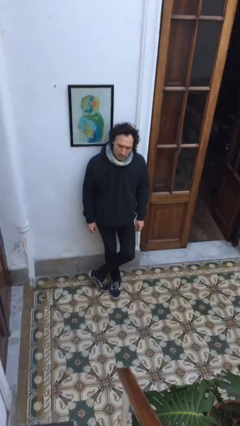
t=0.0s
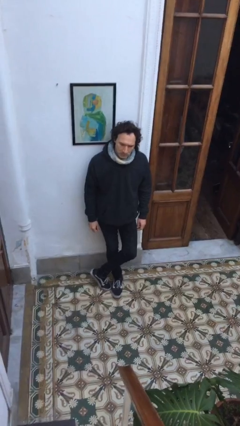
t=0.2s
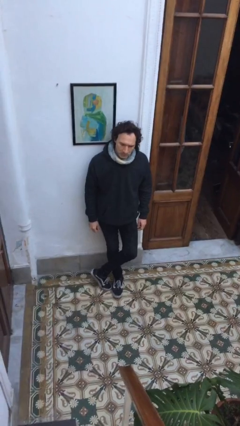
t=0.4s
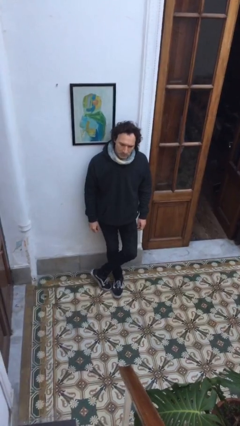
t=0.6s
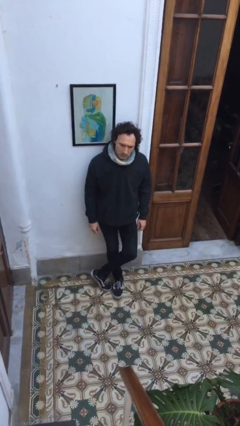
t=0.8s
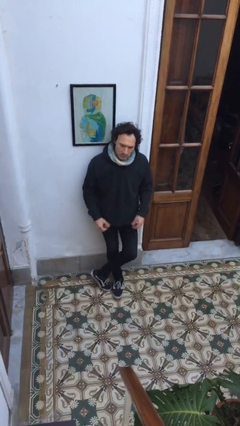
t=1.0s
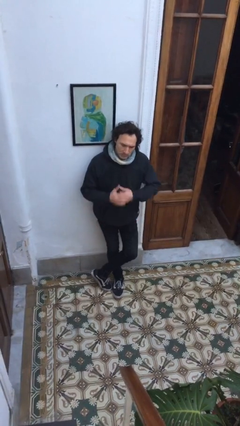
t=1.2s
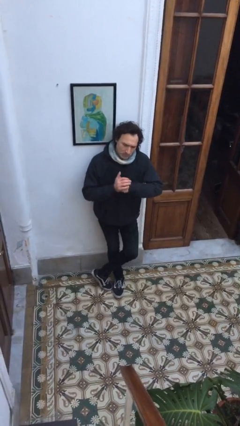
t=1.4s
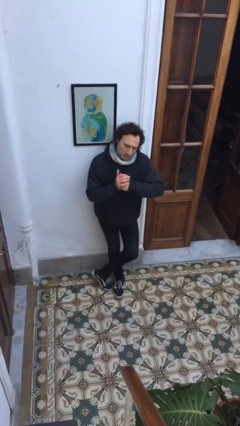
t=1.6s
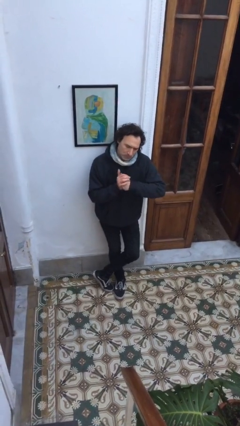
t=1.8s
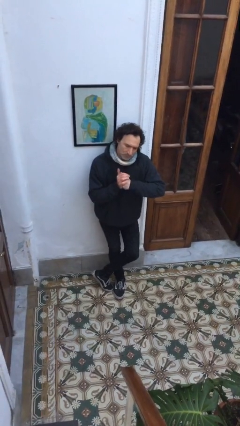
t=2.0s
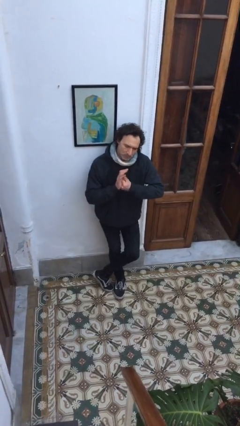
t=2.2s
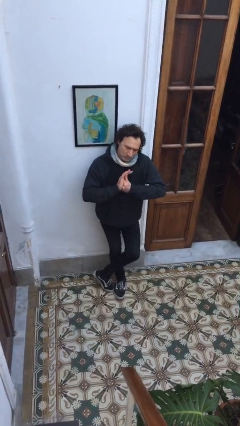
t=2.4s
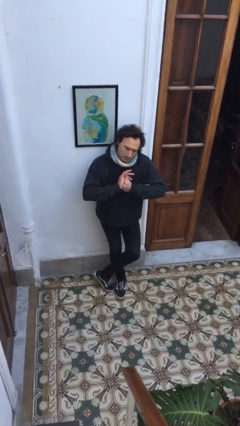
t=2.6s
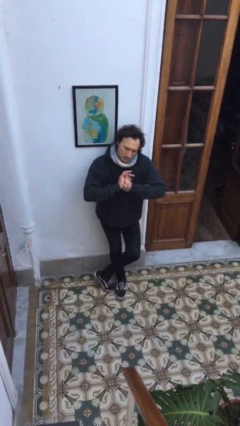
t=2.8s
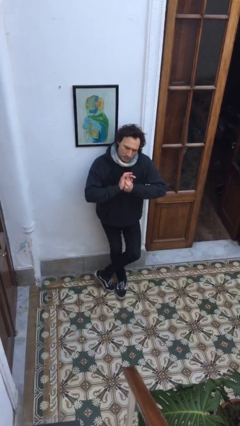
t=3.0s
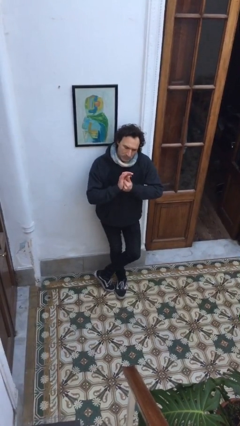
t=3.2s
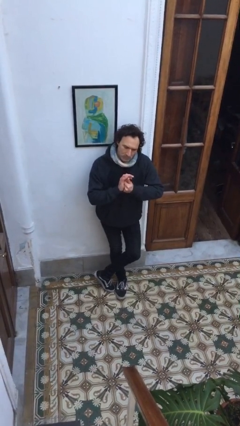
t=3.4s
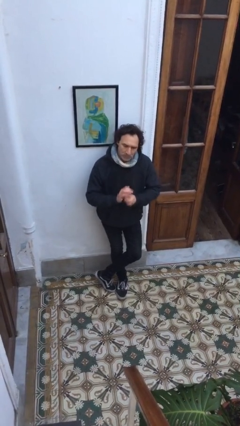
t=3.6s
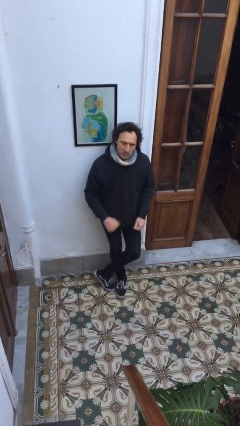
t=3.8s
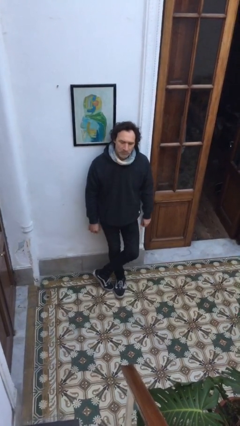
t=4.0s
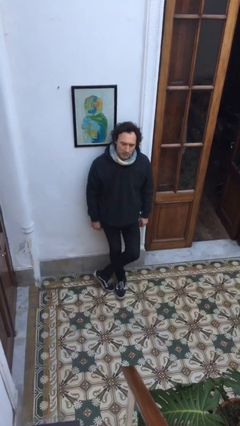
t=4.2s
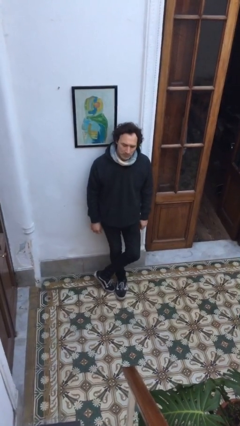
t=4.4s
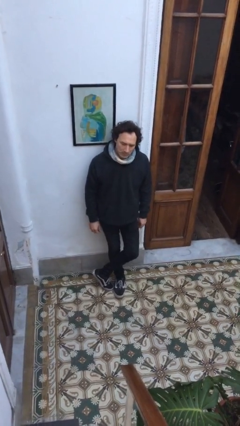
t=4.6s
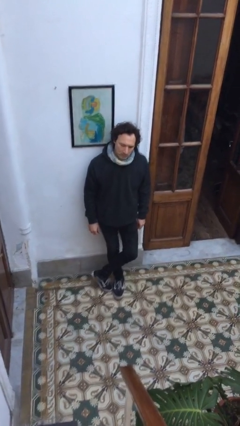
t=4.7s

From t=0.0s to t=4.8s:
person cracks knuckles

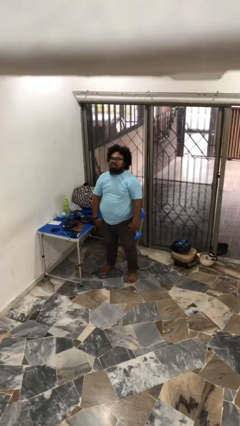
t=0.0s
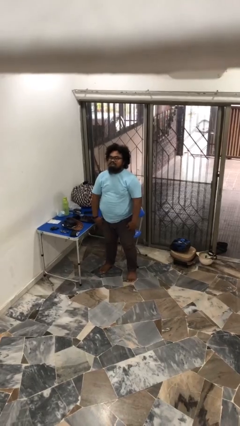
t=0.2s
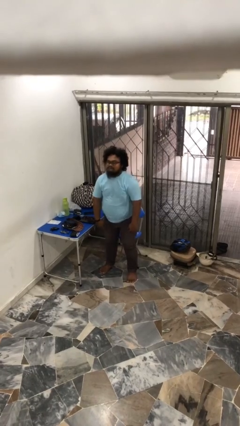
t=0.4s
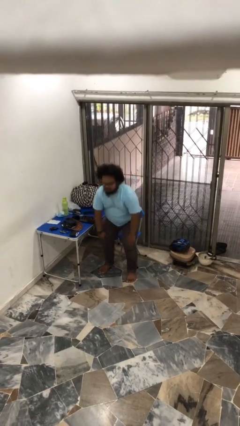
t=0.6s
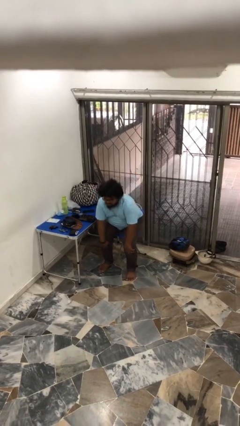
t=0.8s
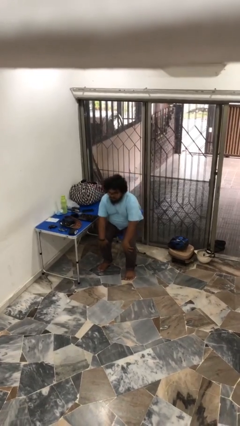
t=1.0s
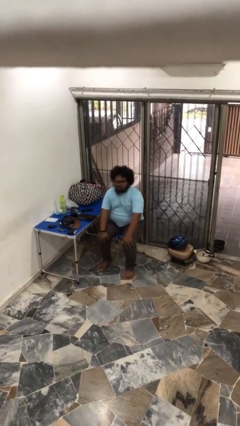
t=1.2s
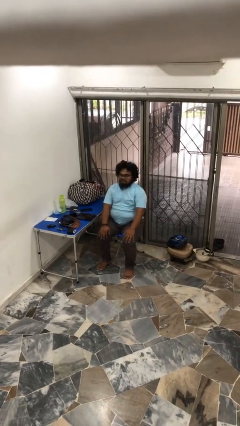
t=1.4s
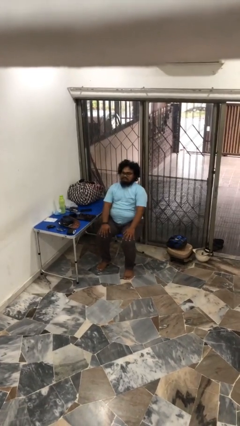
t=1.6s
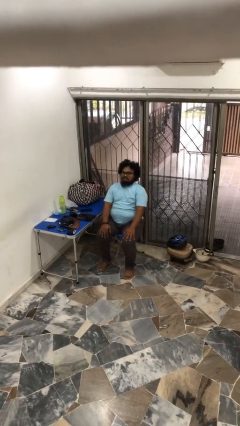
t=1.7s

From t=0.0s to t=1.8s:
person sits down

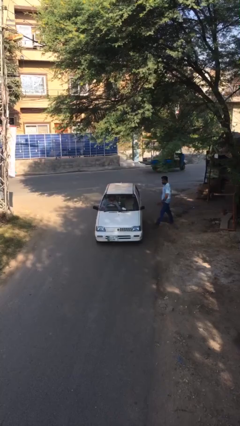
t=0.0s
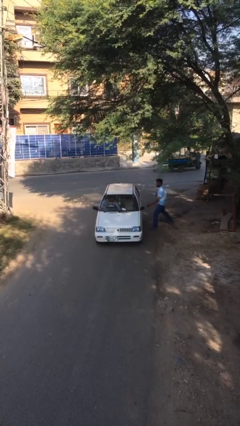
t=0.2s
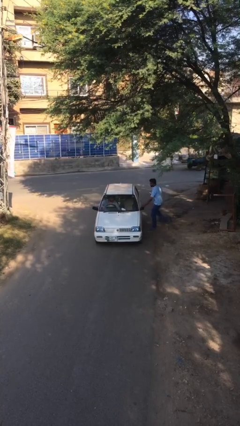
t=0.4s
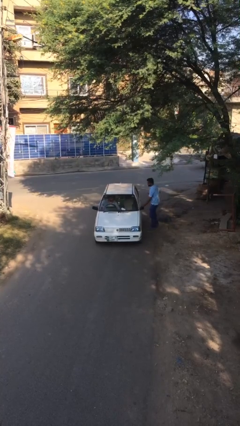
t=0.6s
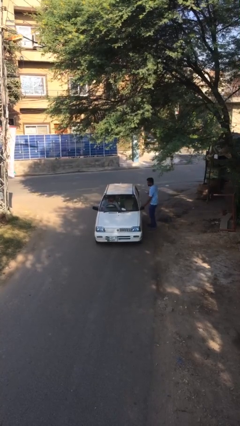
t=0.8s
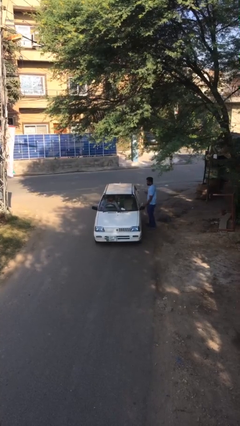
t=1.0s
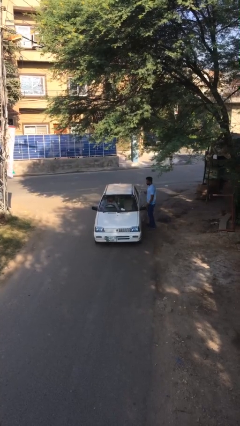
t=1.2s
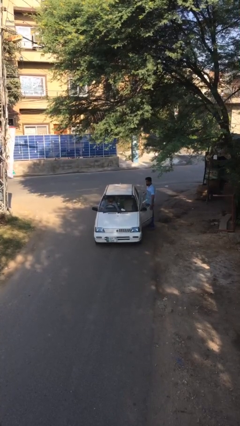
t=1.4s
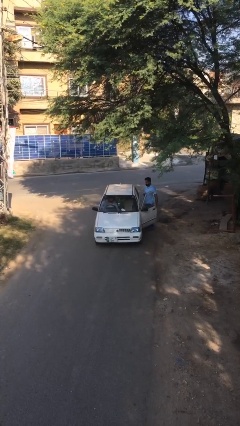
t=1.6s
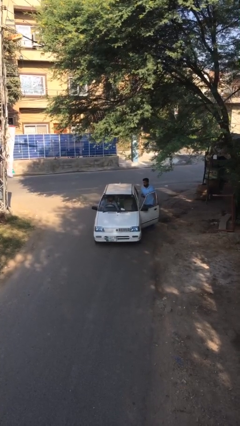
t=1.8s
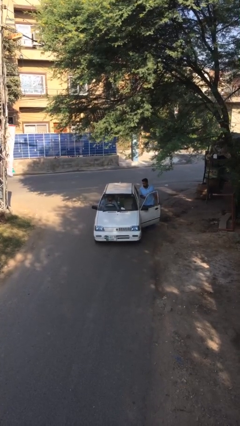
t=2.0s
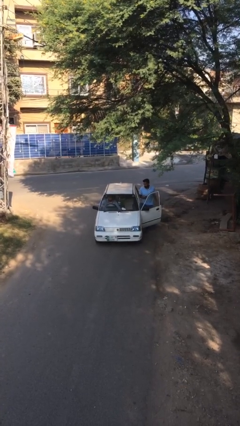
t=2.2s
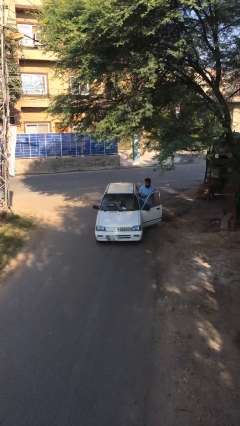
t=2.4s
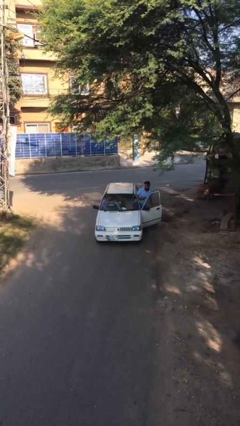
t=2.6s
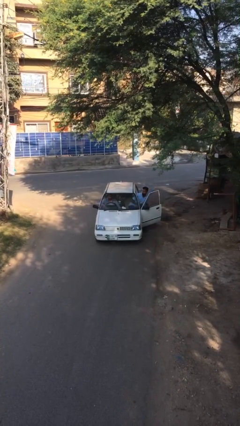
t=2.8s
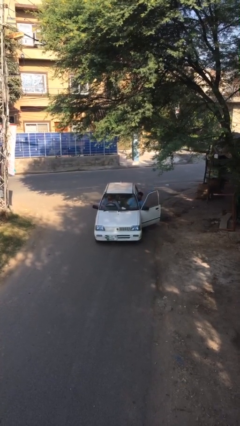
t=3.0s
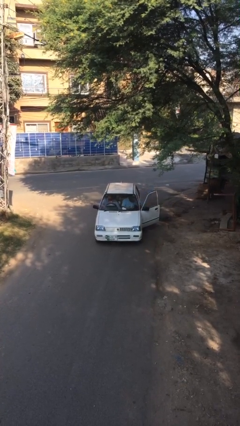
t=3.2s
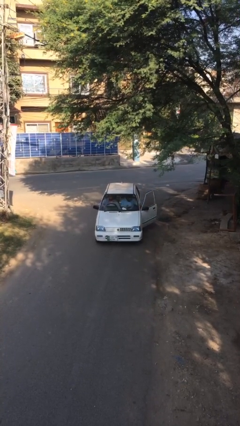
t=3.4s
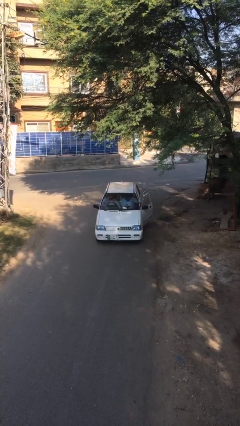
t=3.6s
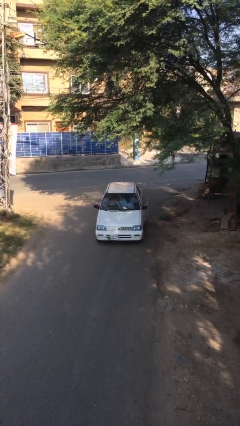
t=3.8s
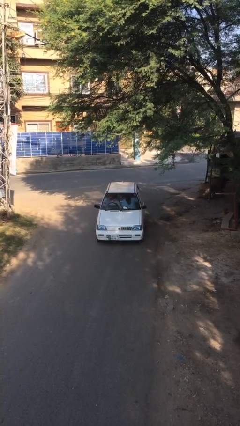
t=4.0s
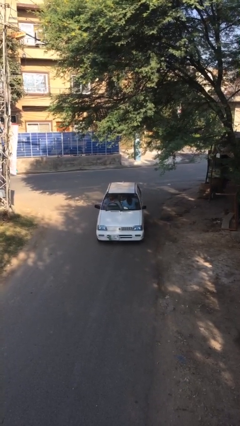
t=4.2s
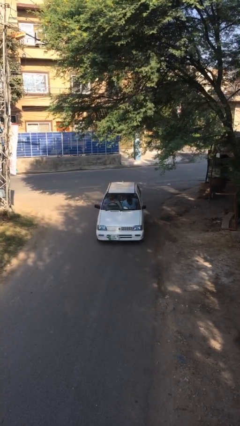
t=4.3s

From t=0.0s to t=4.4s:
car picks up person

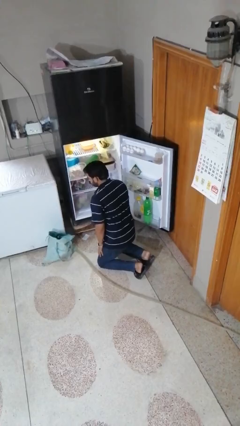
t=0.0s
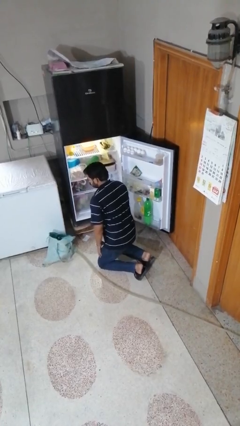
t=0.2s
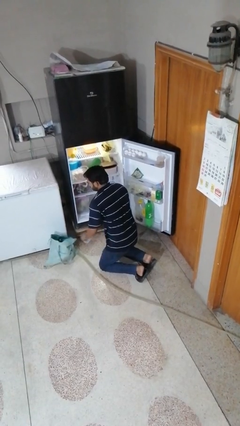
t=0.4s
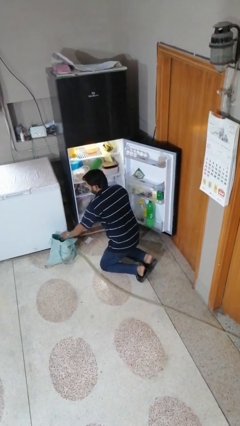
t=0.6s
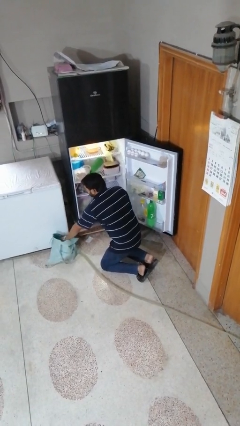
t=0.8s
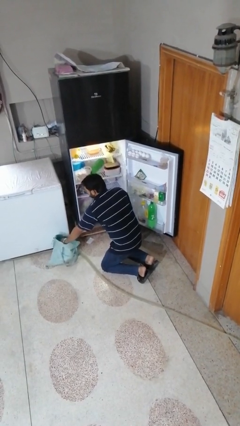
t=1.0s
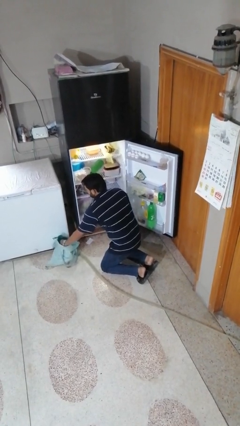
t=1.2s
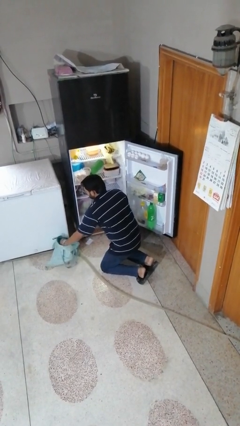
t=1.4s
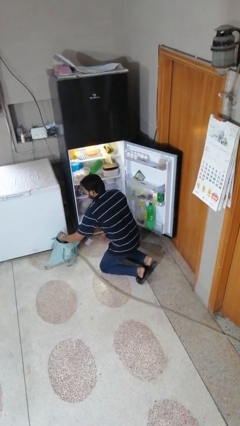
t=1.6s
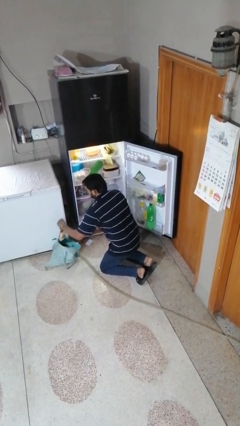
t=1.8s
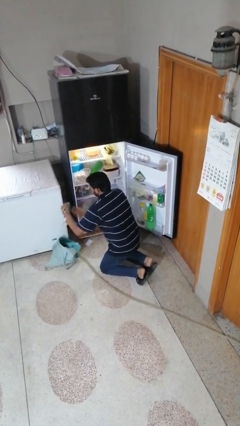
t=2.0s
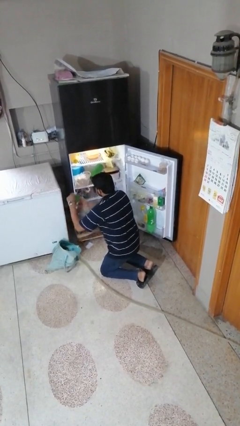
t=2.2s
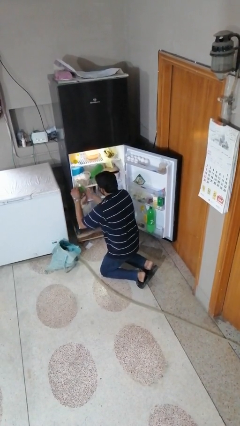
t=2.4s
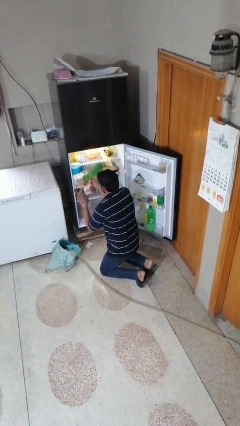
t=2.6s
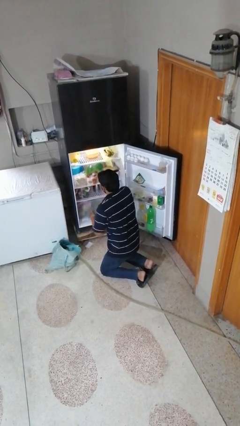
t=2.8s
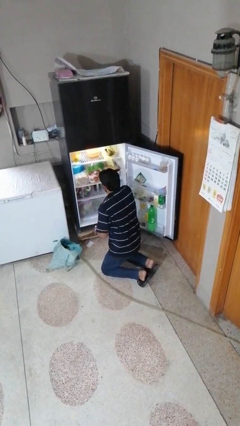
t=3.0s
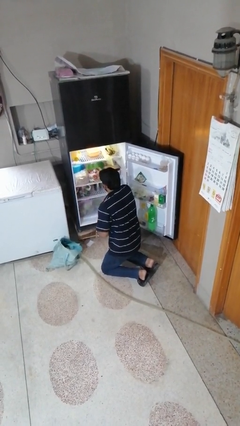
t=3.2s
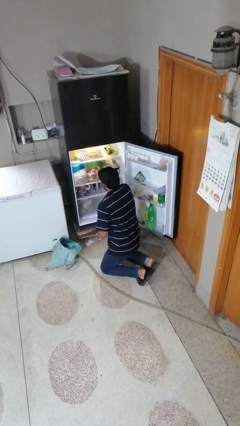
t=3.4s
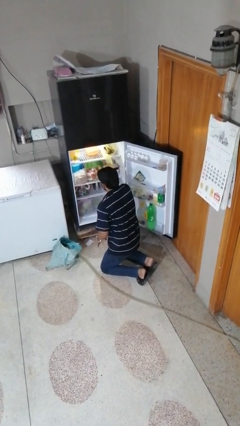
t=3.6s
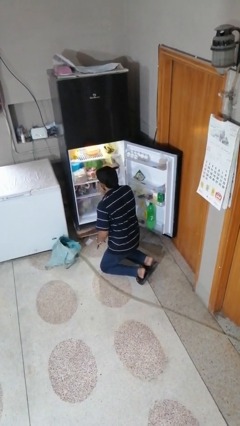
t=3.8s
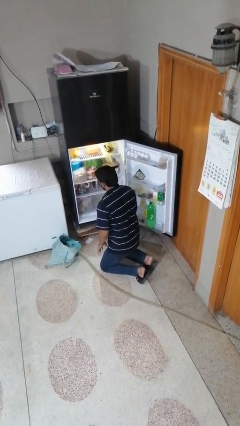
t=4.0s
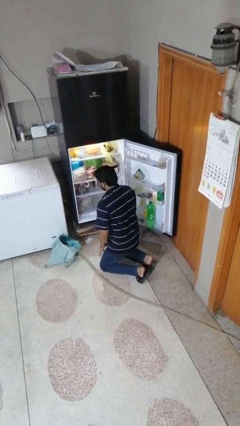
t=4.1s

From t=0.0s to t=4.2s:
person loads groceries into refrigerator

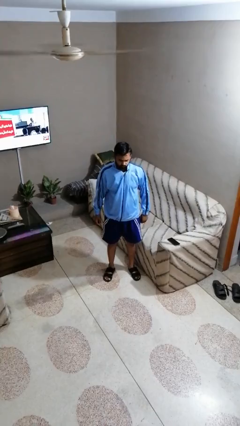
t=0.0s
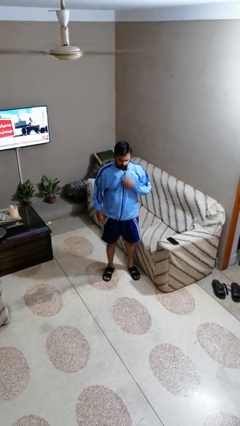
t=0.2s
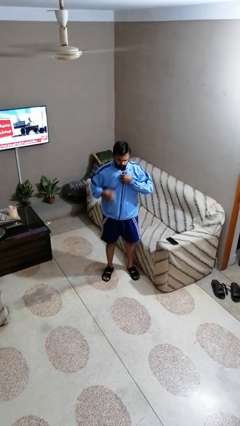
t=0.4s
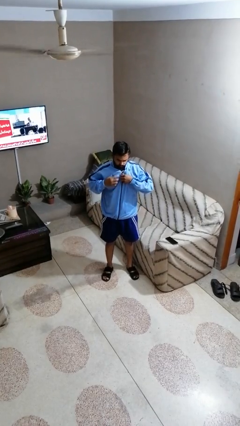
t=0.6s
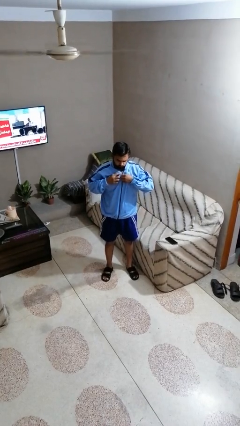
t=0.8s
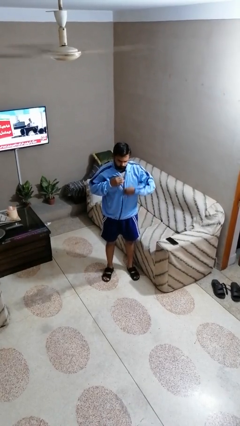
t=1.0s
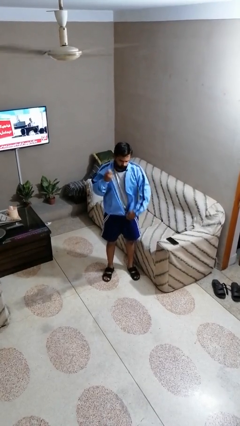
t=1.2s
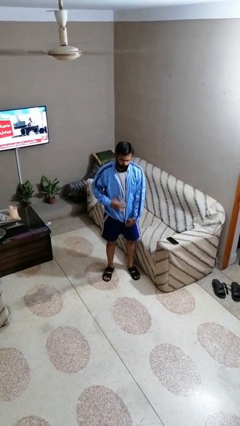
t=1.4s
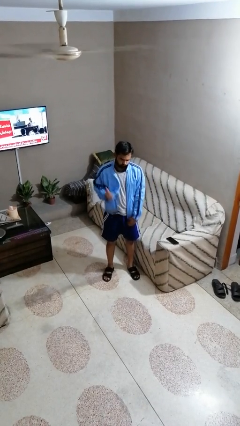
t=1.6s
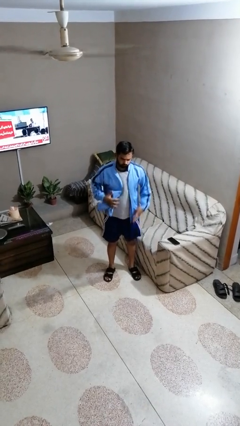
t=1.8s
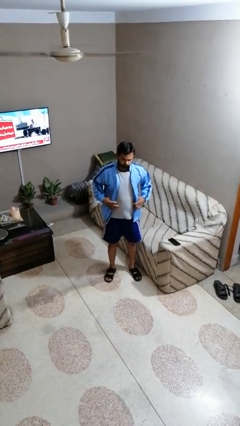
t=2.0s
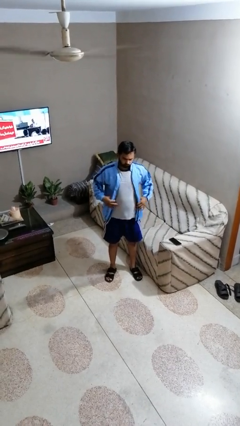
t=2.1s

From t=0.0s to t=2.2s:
person unzips jacket
